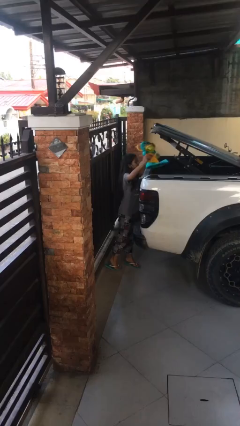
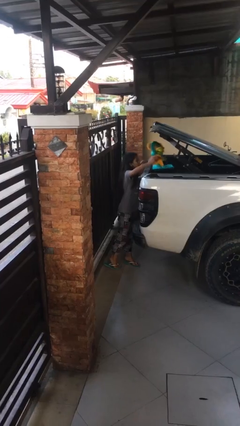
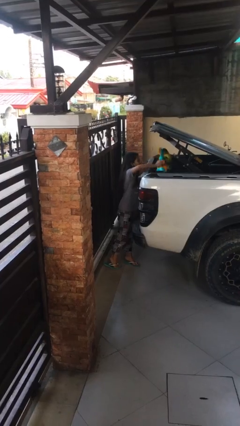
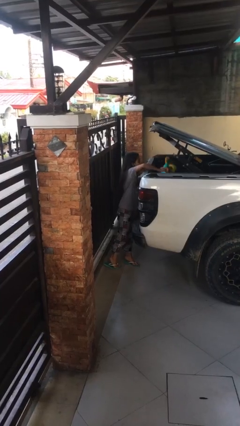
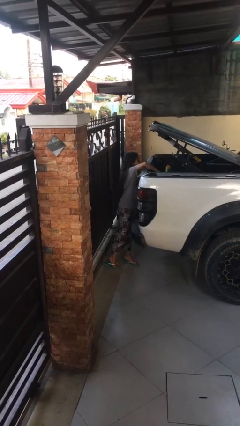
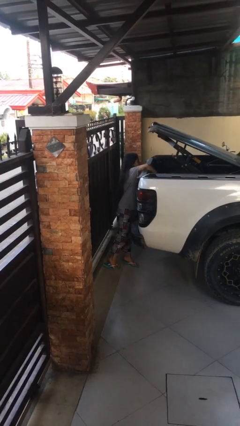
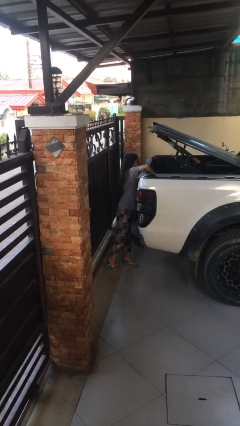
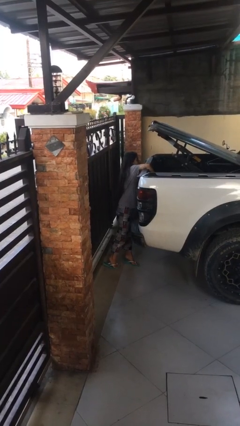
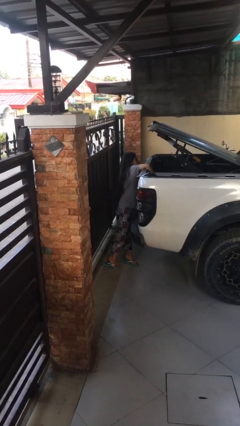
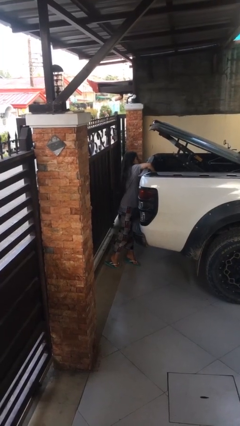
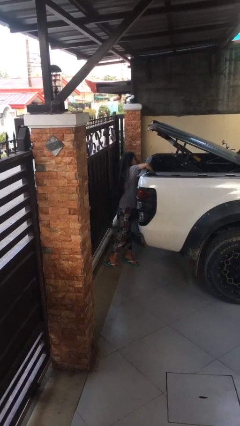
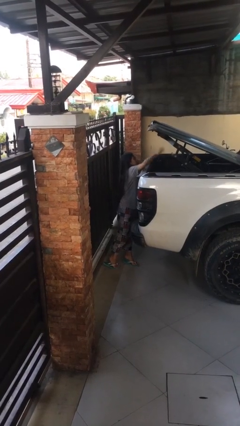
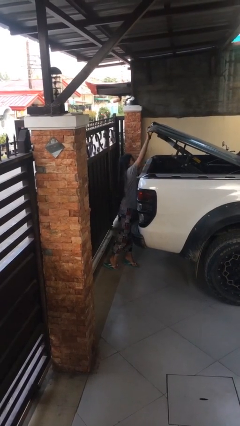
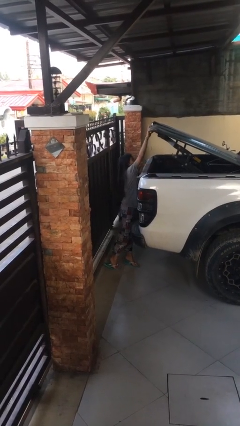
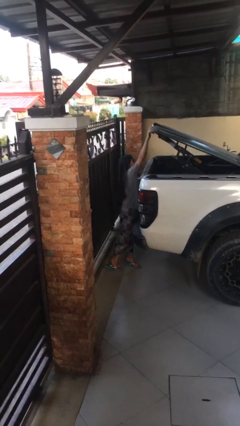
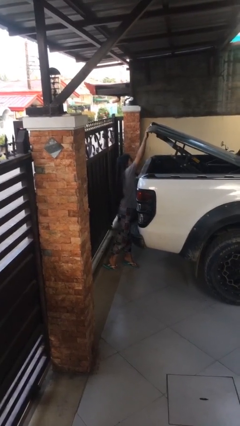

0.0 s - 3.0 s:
person loads car

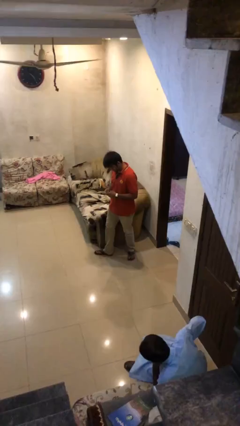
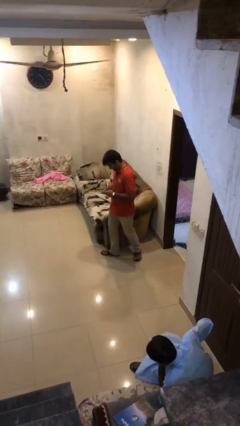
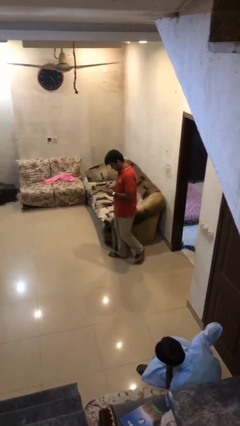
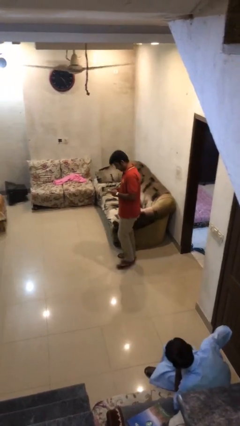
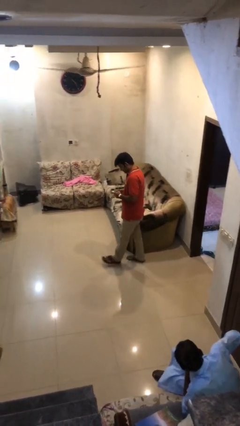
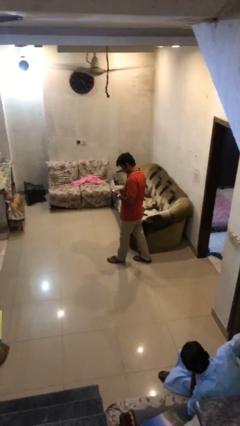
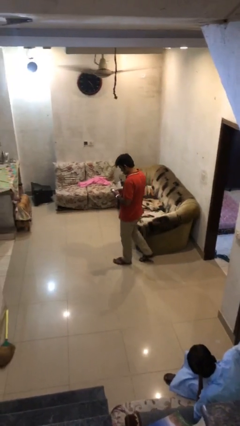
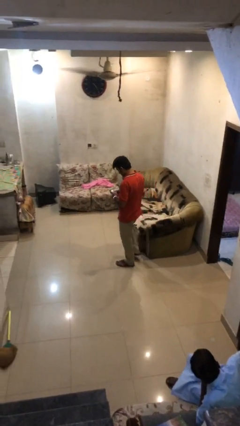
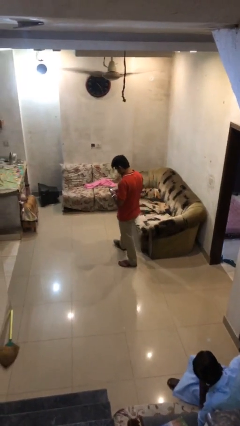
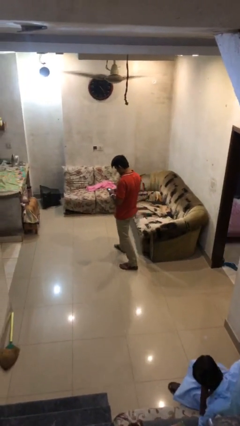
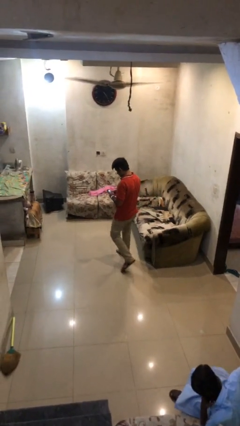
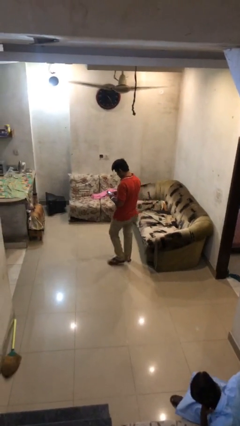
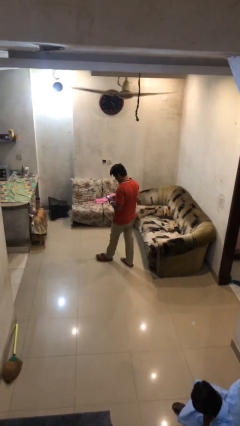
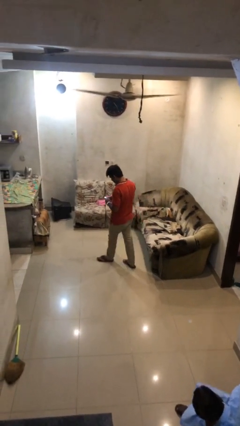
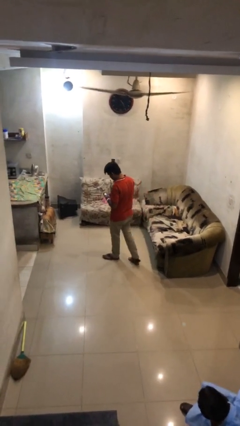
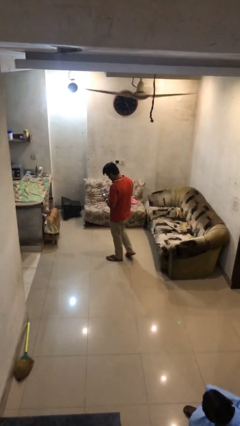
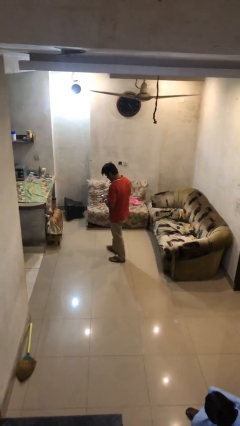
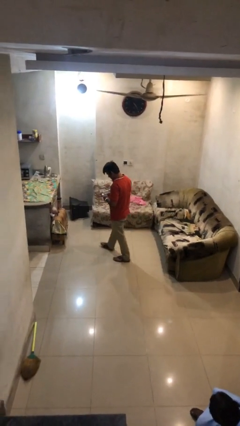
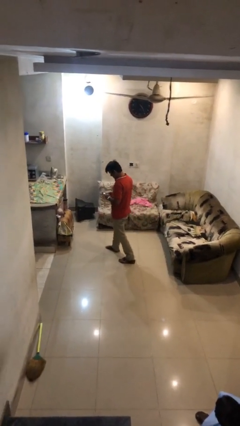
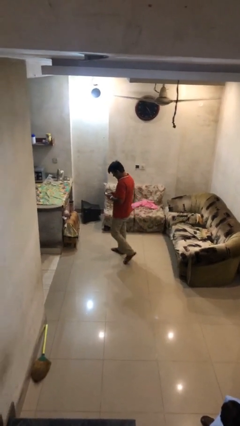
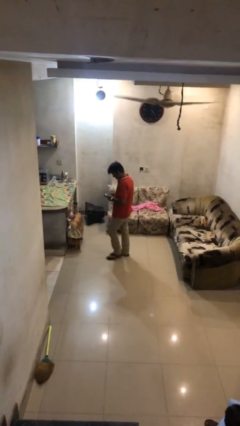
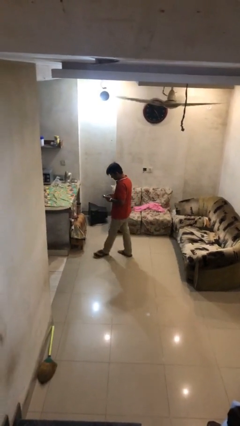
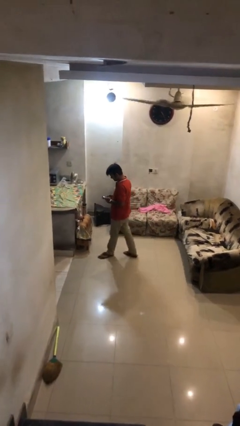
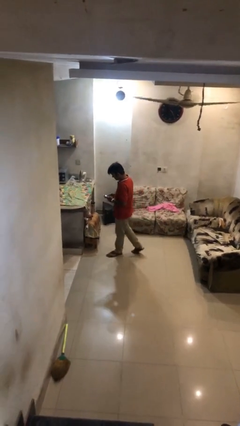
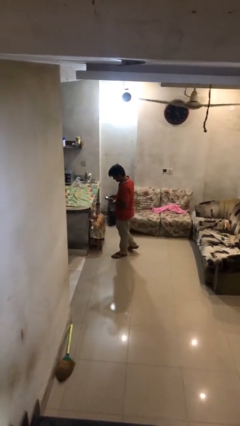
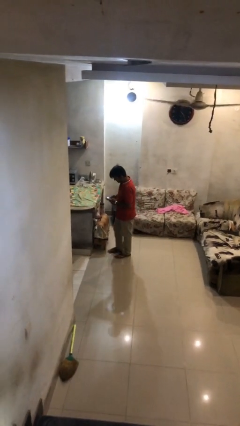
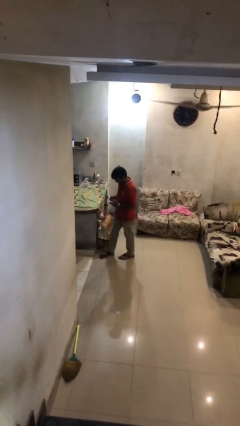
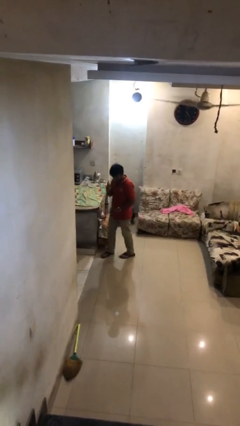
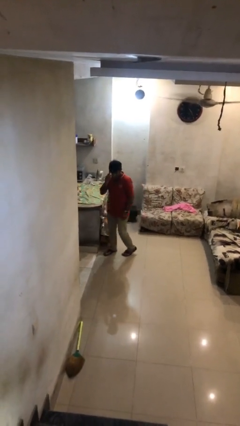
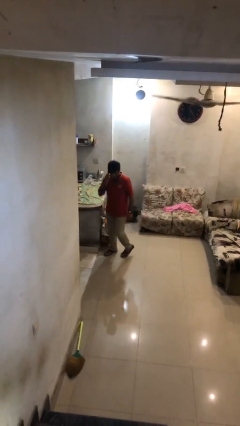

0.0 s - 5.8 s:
person texts on phone

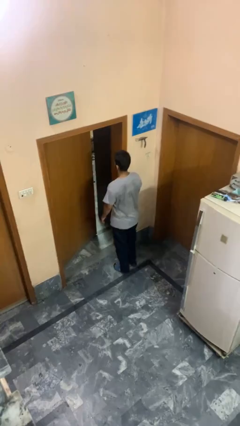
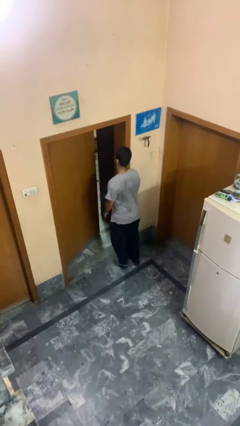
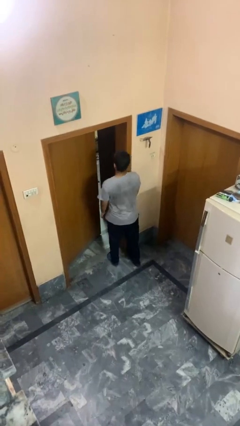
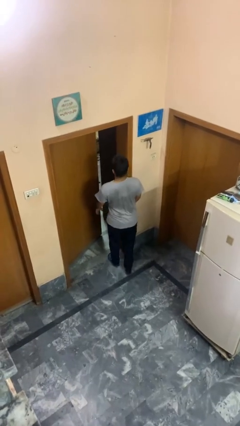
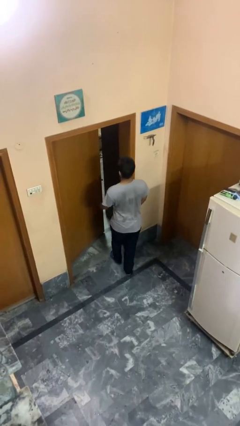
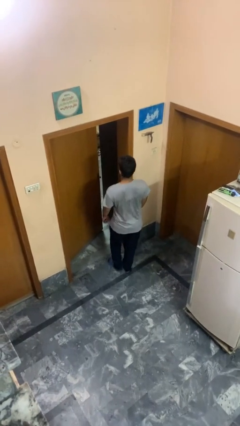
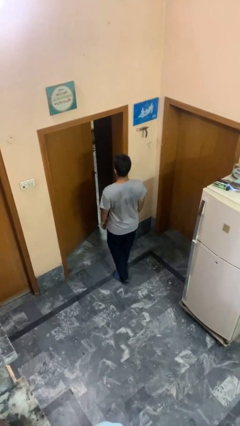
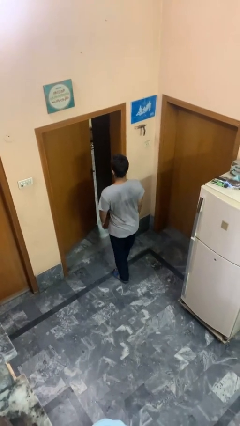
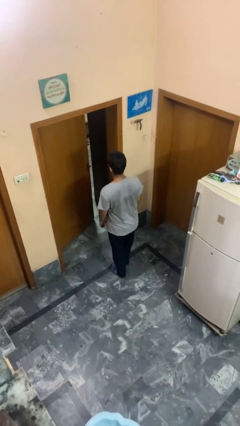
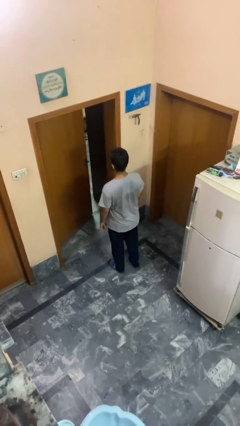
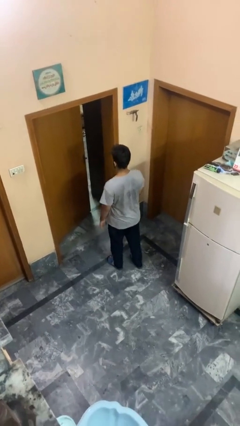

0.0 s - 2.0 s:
person bumps into wall

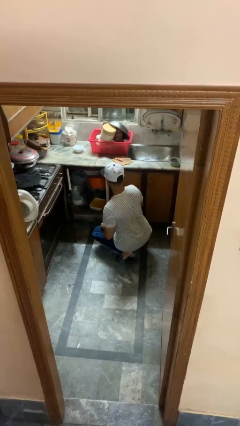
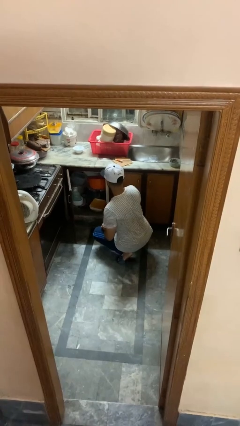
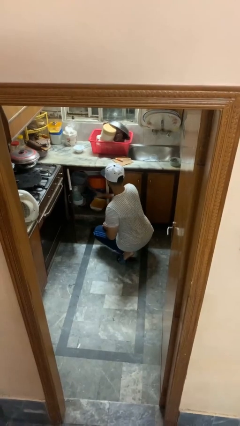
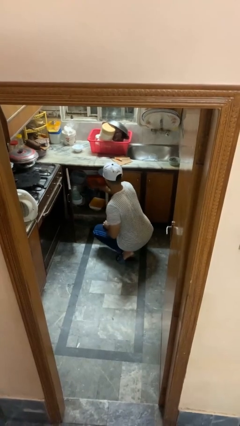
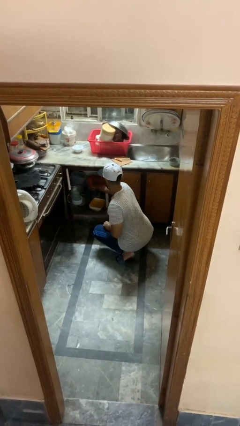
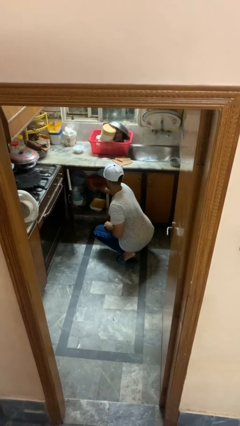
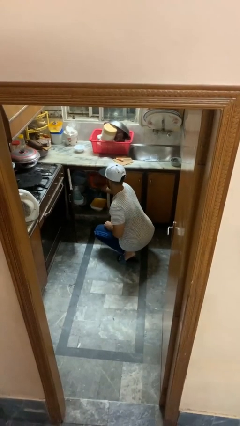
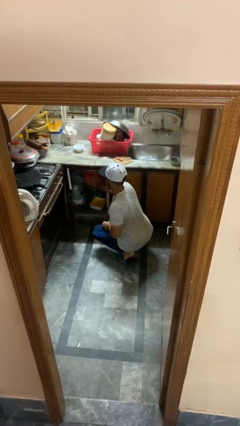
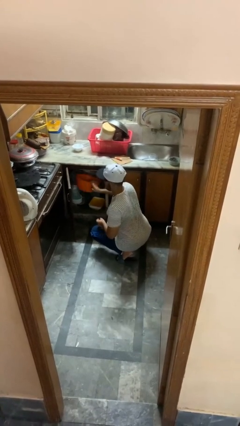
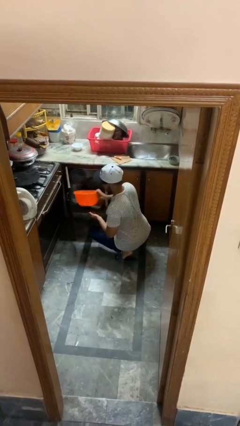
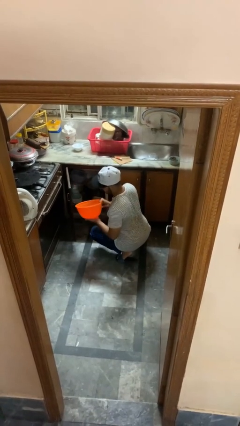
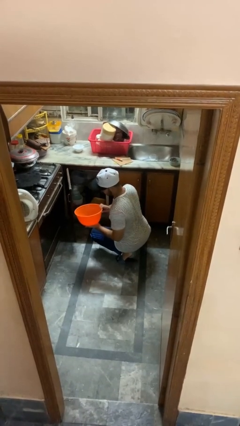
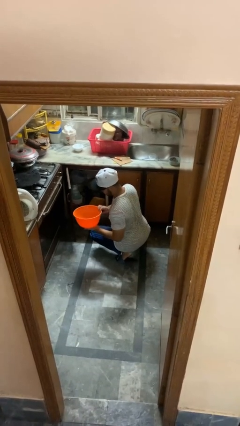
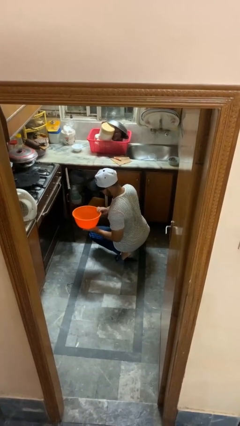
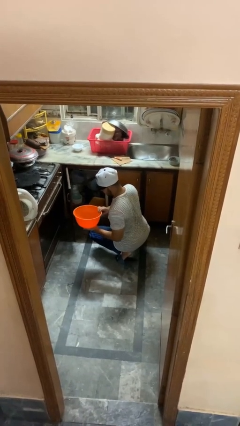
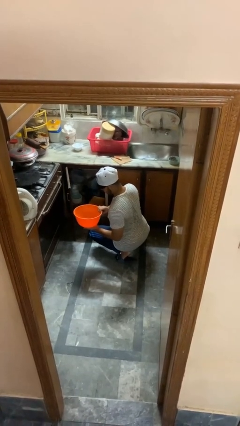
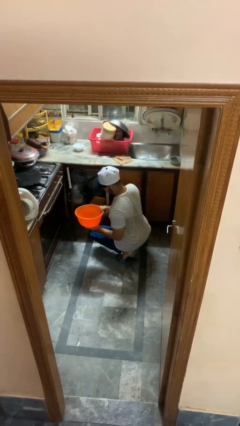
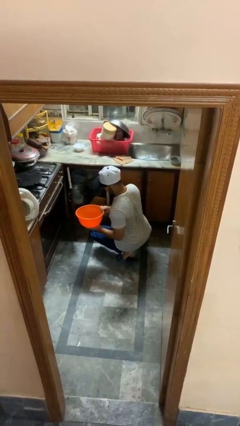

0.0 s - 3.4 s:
person takes object from kitchen drawer

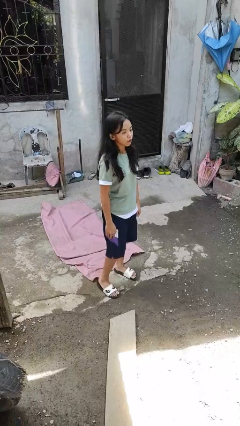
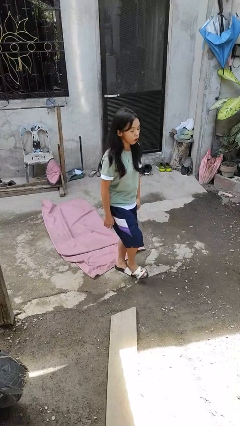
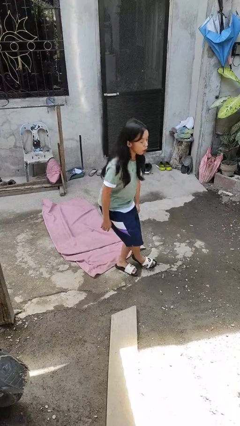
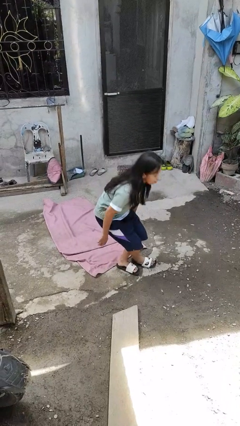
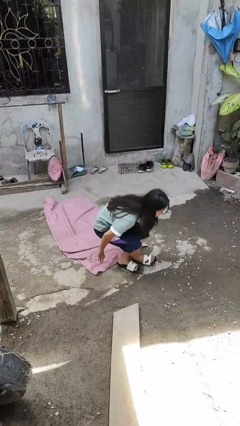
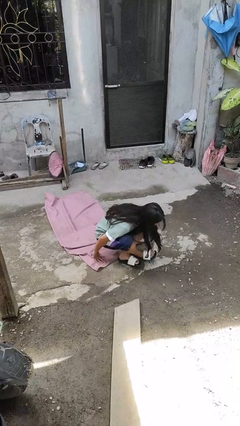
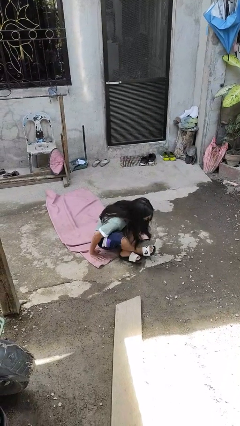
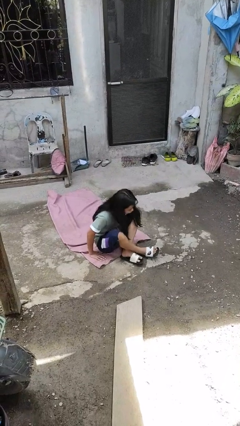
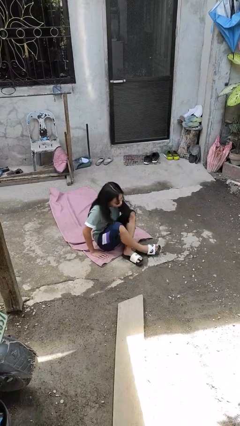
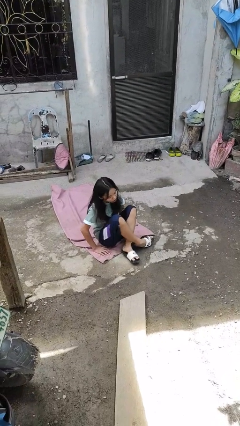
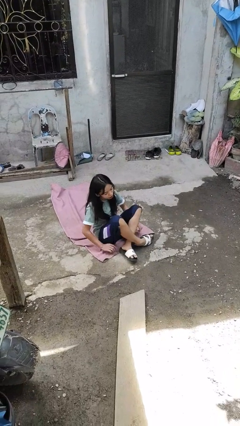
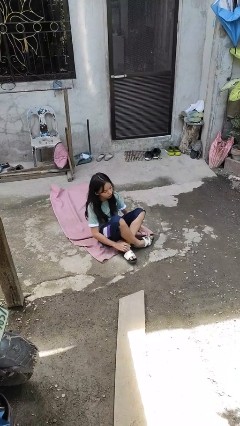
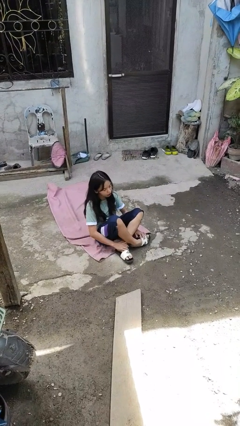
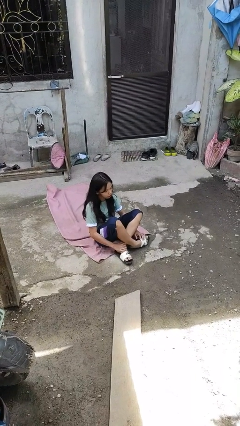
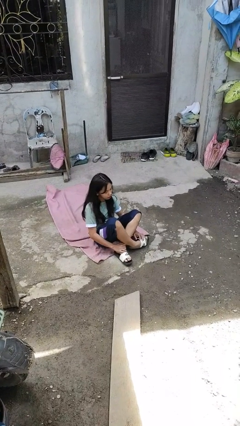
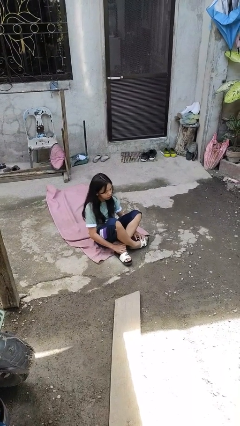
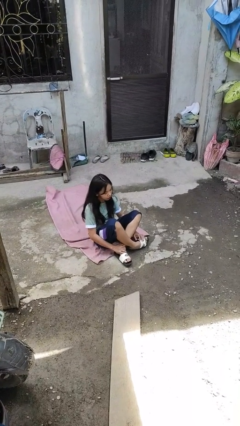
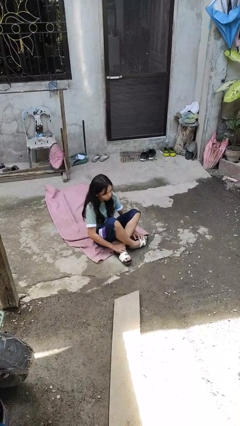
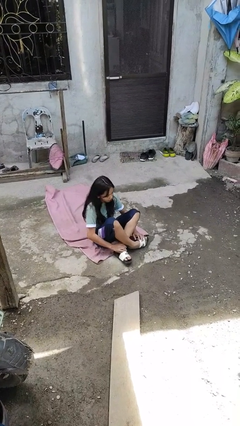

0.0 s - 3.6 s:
person sits crisscross

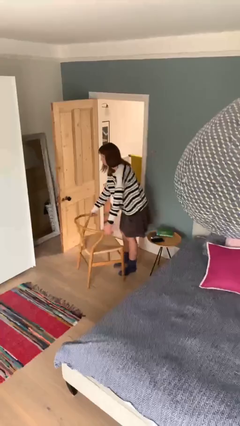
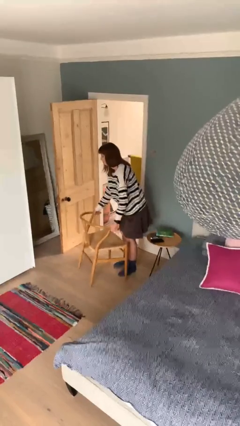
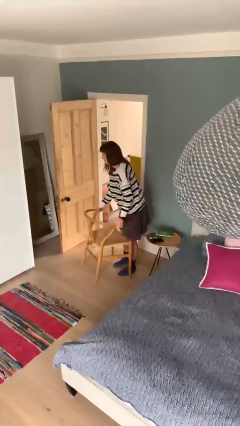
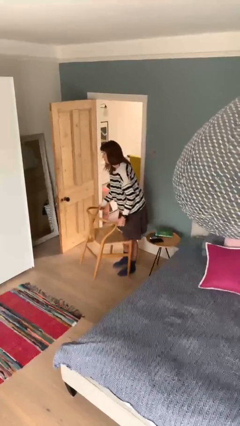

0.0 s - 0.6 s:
person picks up object from floor
